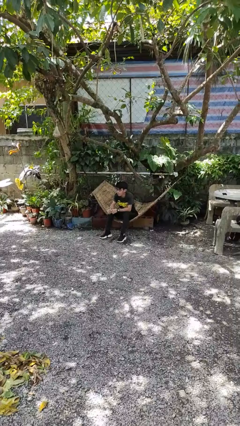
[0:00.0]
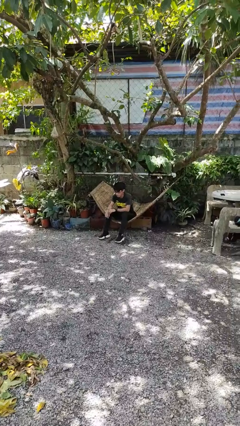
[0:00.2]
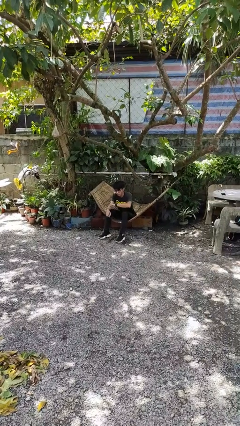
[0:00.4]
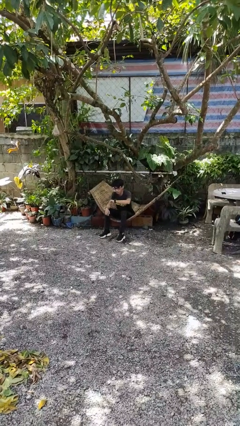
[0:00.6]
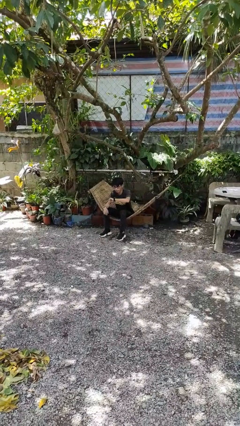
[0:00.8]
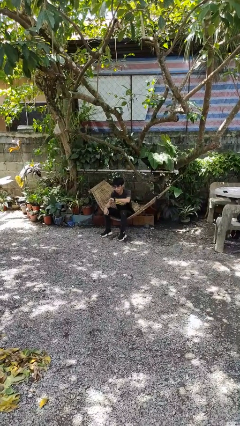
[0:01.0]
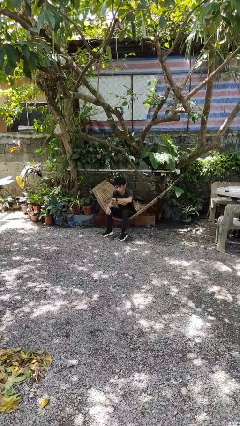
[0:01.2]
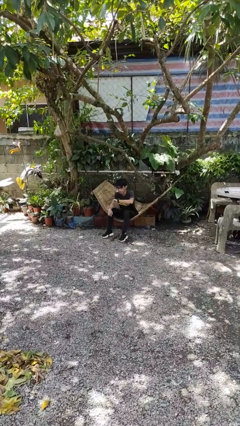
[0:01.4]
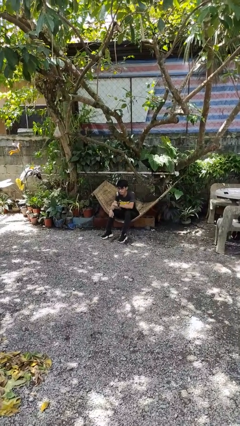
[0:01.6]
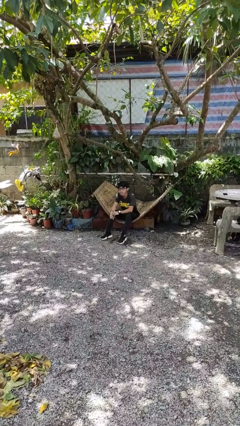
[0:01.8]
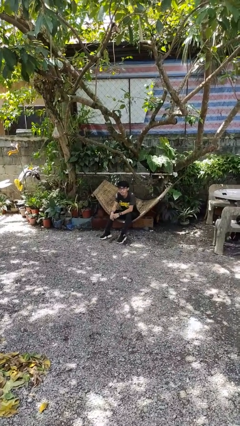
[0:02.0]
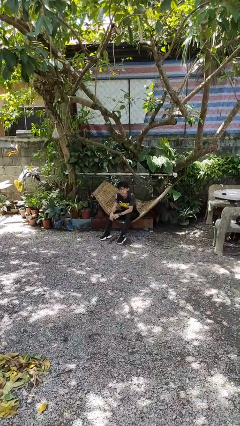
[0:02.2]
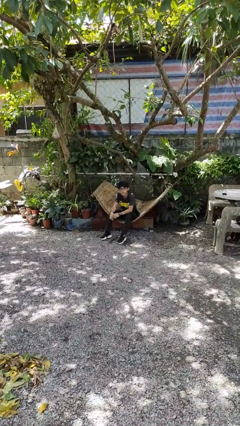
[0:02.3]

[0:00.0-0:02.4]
person looks at wristwatch

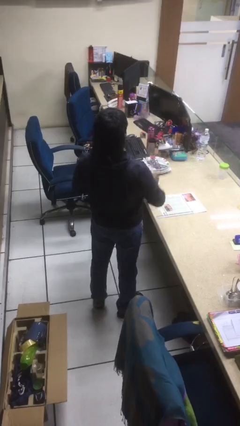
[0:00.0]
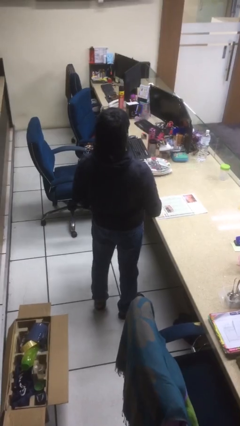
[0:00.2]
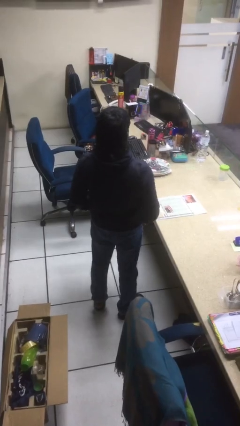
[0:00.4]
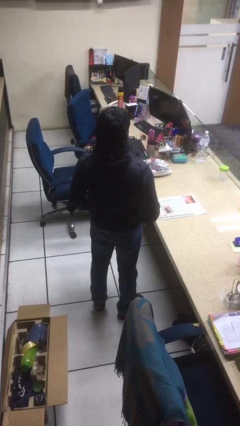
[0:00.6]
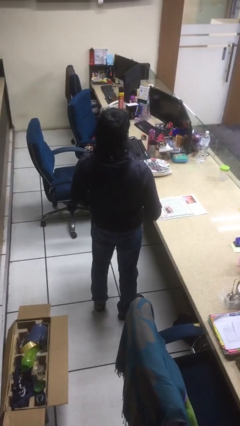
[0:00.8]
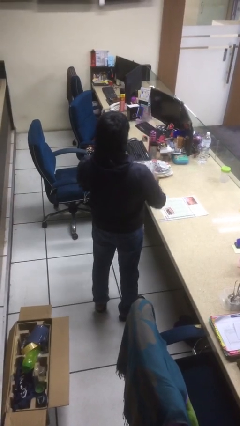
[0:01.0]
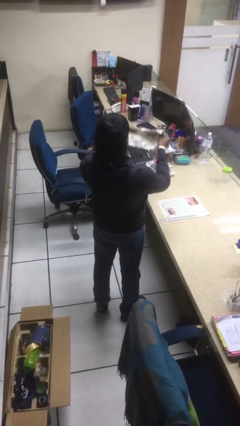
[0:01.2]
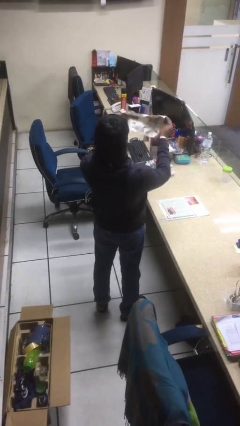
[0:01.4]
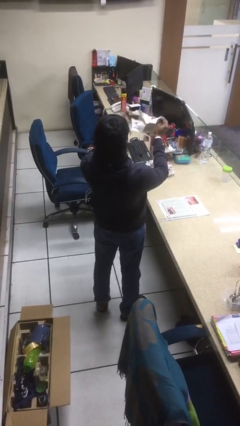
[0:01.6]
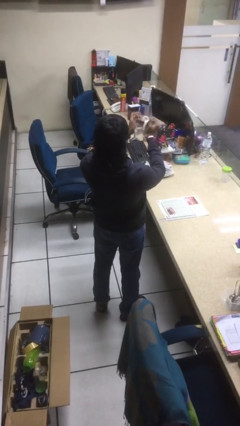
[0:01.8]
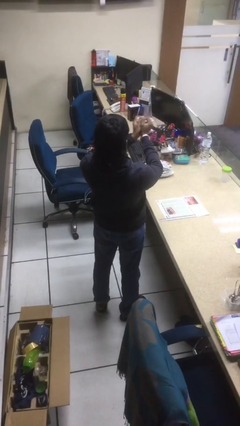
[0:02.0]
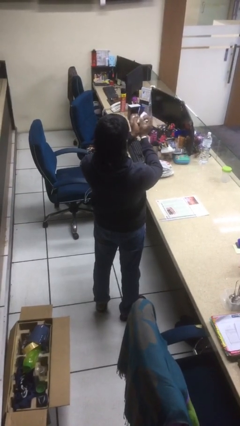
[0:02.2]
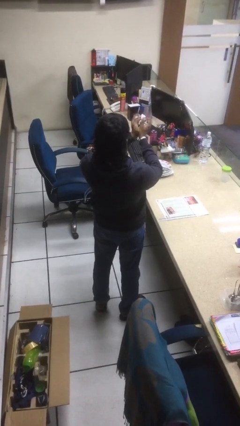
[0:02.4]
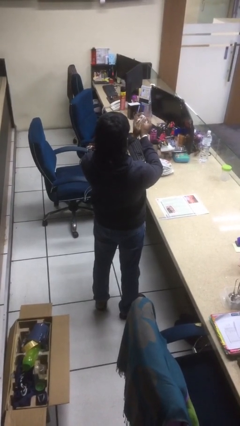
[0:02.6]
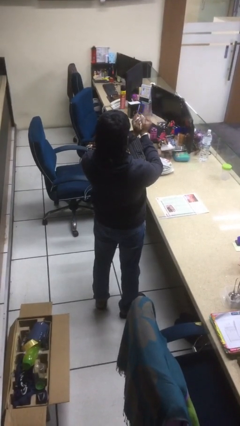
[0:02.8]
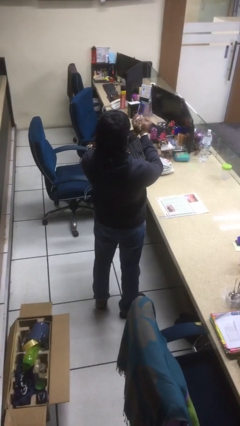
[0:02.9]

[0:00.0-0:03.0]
person crumples paper

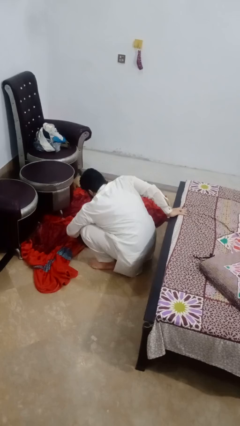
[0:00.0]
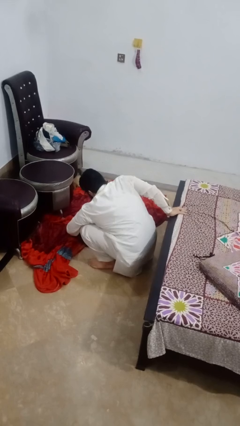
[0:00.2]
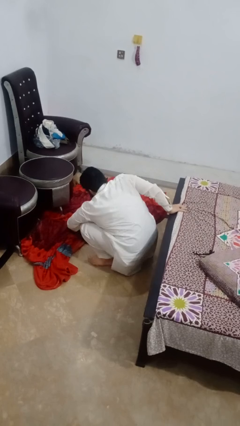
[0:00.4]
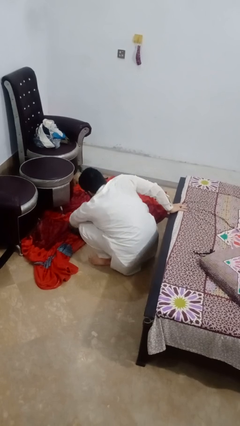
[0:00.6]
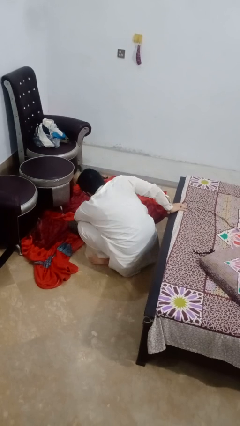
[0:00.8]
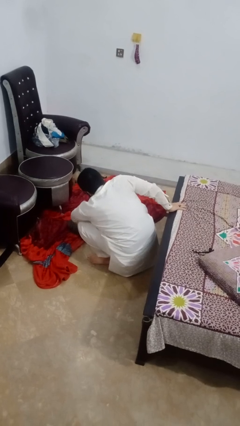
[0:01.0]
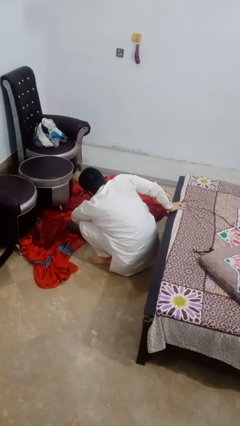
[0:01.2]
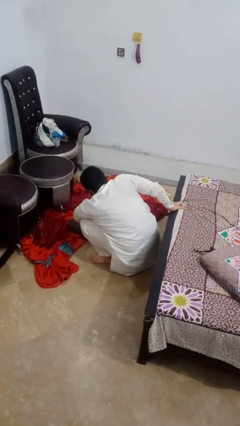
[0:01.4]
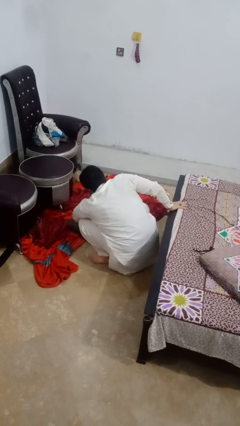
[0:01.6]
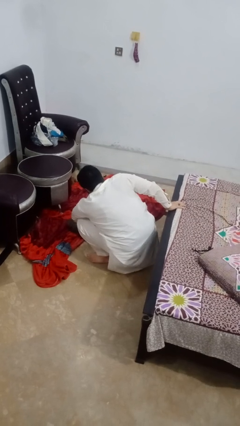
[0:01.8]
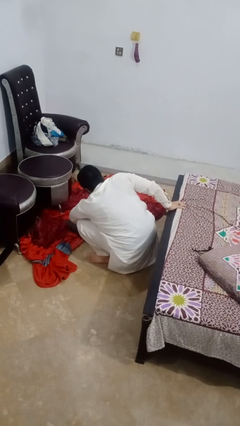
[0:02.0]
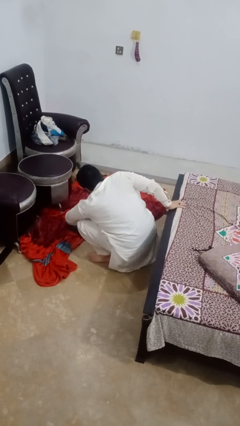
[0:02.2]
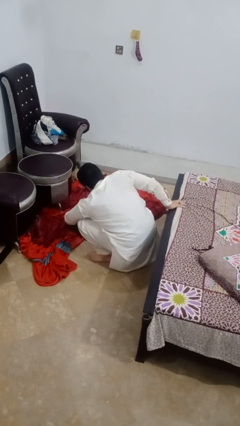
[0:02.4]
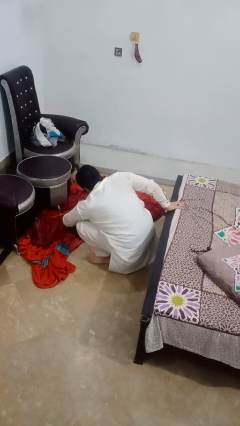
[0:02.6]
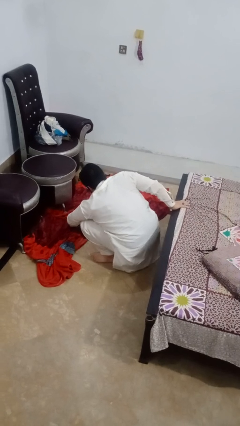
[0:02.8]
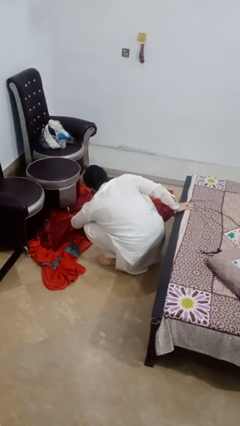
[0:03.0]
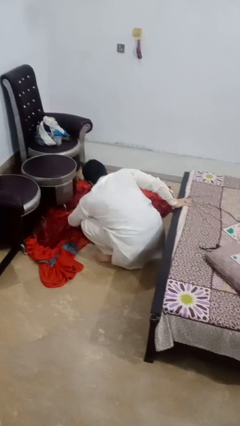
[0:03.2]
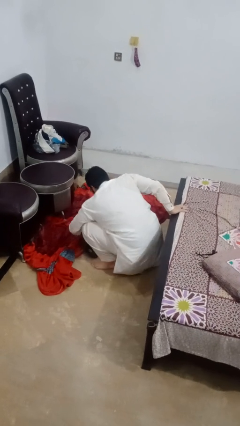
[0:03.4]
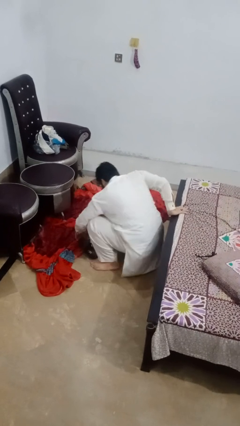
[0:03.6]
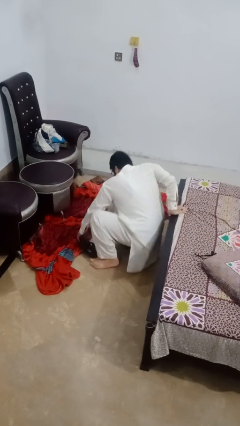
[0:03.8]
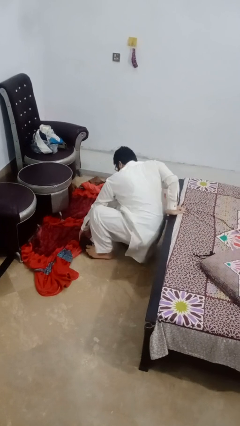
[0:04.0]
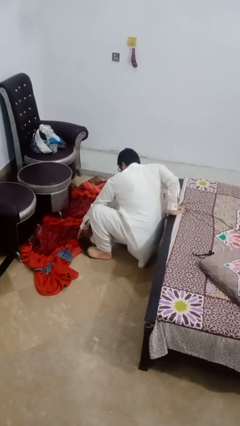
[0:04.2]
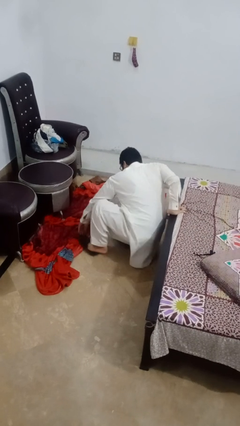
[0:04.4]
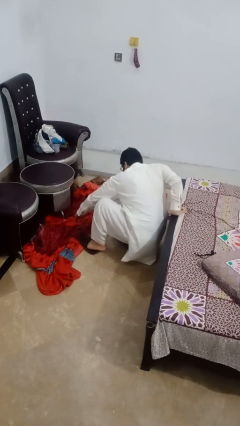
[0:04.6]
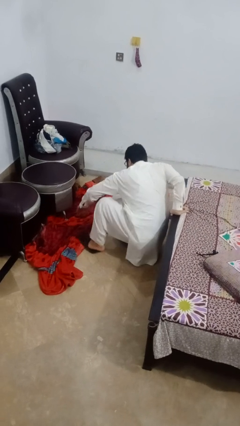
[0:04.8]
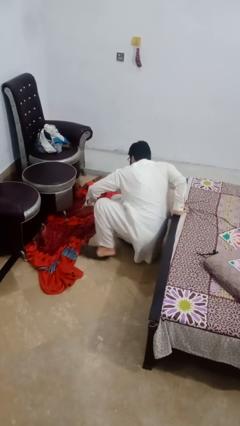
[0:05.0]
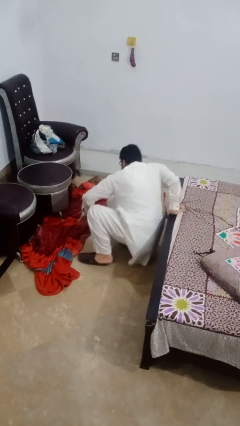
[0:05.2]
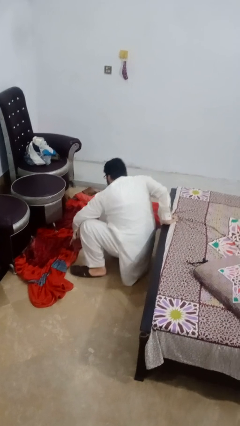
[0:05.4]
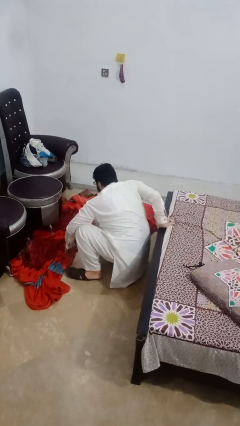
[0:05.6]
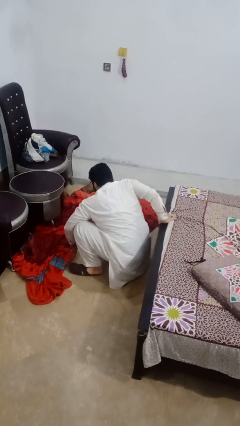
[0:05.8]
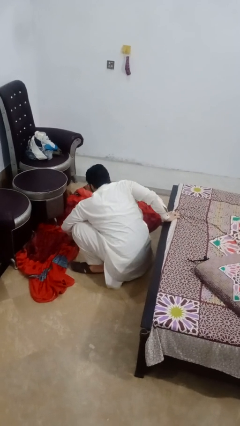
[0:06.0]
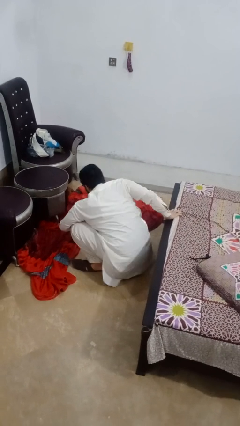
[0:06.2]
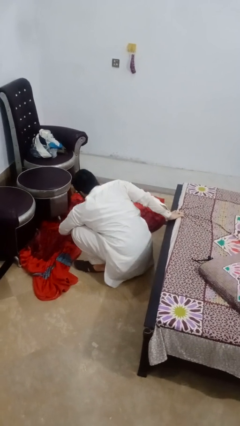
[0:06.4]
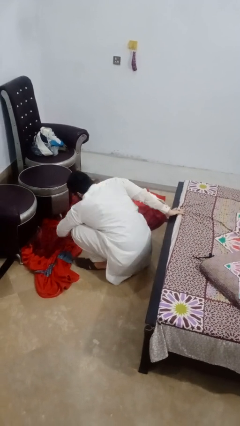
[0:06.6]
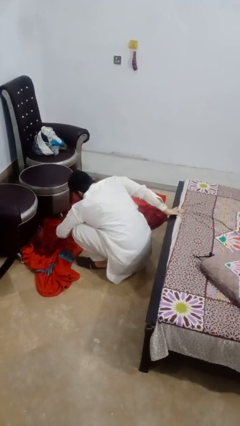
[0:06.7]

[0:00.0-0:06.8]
person puts on shoes

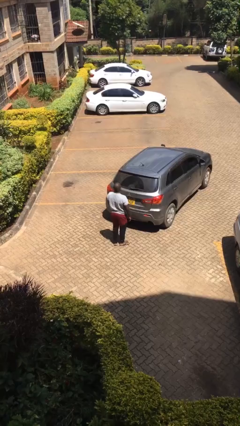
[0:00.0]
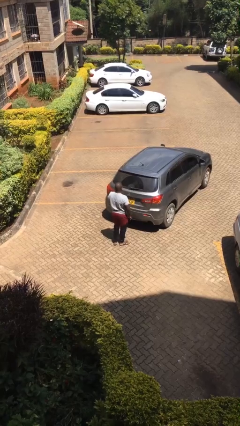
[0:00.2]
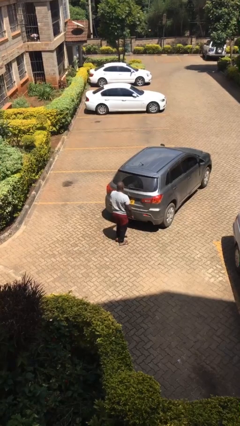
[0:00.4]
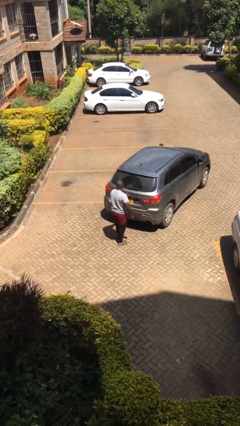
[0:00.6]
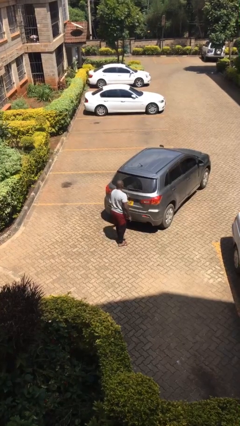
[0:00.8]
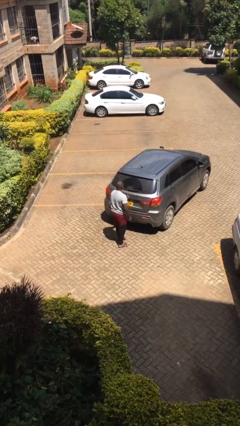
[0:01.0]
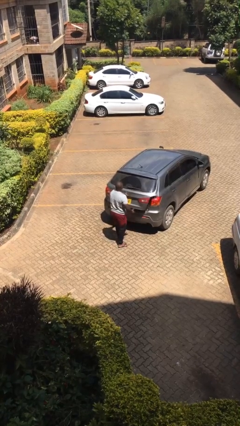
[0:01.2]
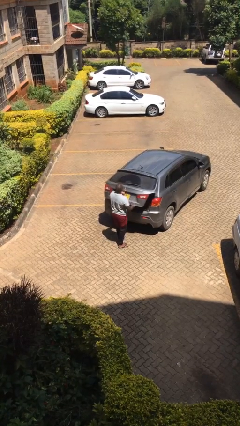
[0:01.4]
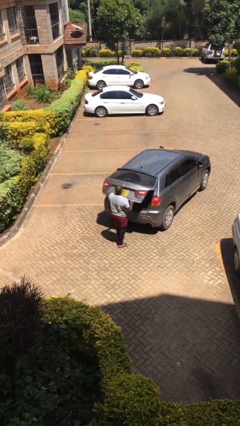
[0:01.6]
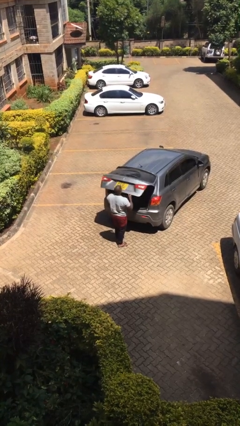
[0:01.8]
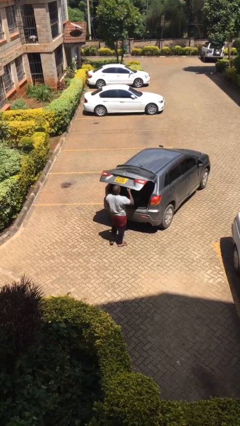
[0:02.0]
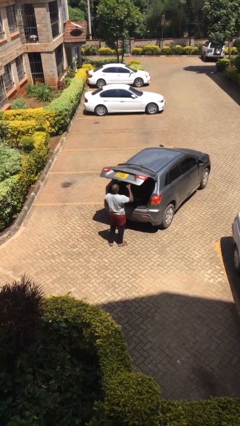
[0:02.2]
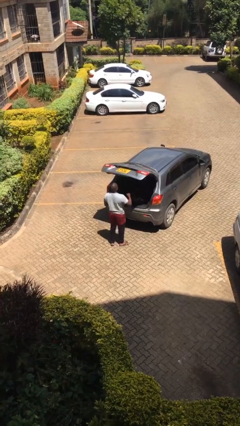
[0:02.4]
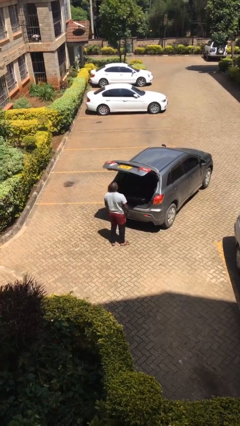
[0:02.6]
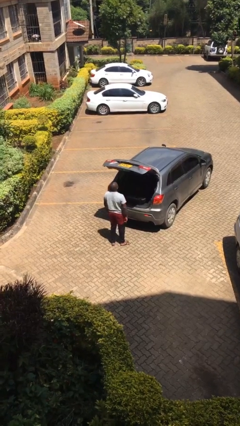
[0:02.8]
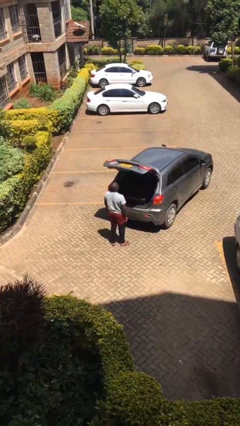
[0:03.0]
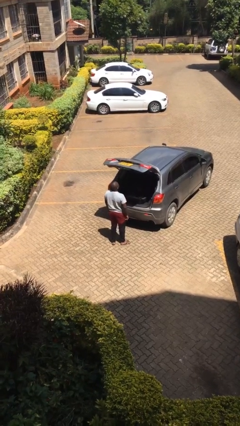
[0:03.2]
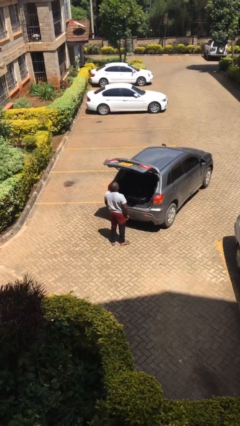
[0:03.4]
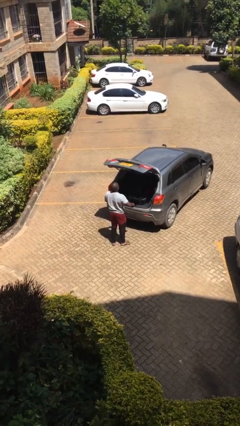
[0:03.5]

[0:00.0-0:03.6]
person opens car trunk

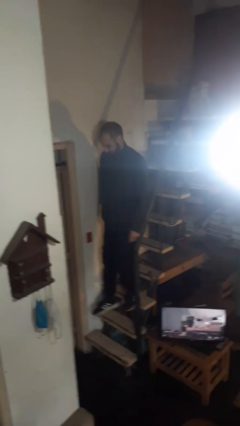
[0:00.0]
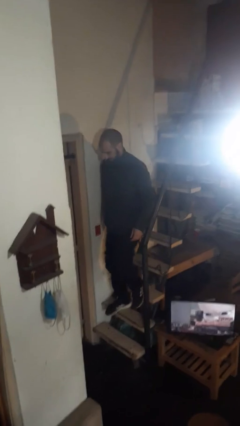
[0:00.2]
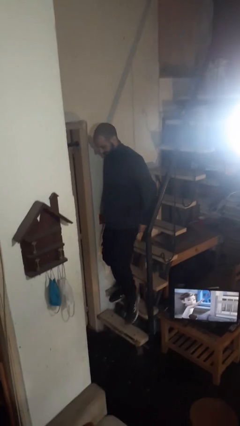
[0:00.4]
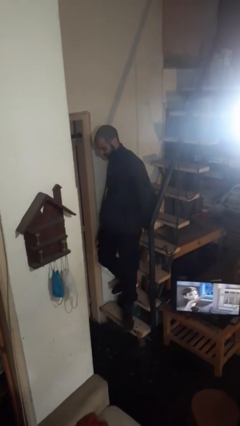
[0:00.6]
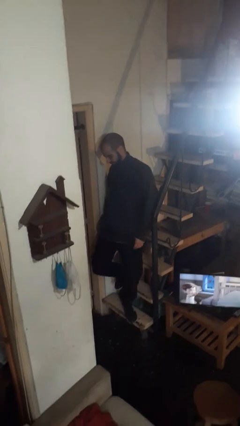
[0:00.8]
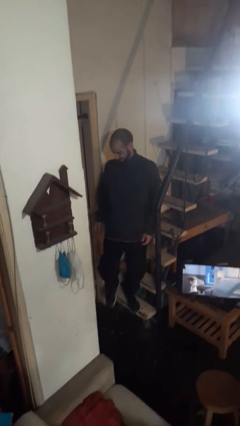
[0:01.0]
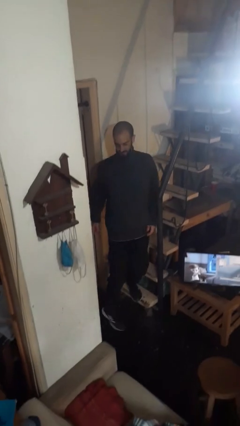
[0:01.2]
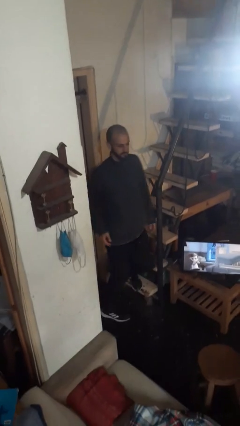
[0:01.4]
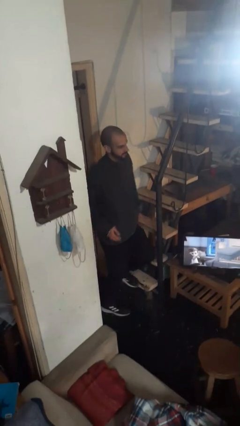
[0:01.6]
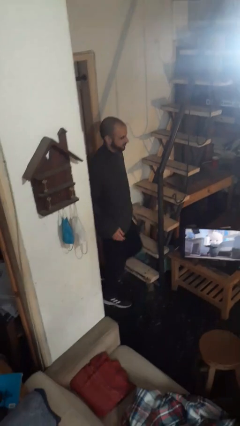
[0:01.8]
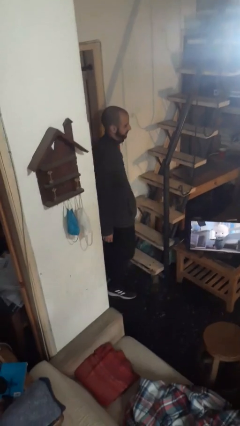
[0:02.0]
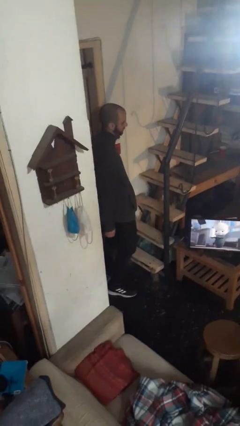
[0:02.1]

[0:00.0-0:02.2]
person climbs down stairs
